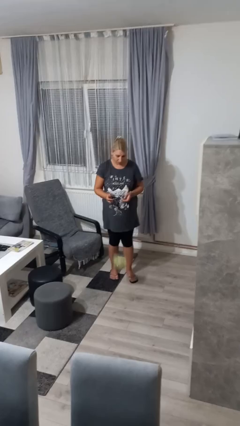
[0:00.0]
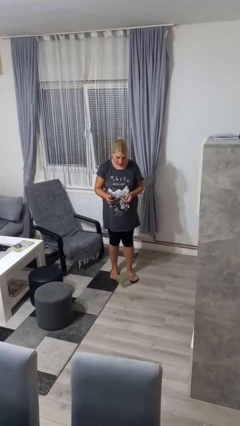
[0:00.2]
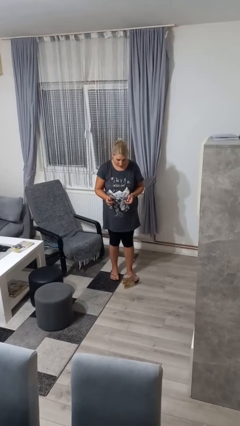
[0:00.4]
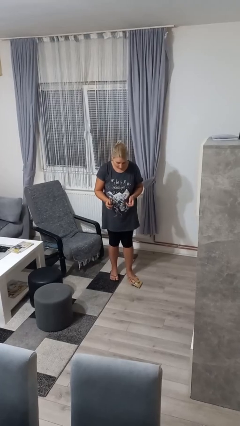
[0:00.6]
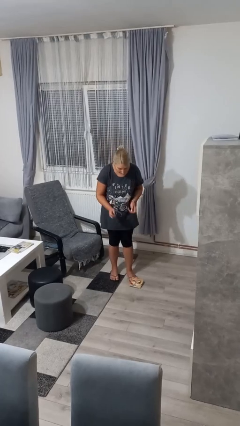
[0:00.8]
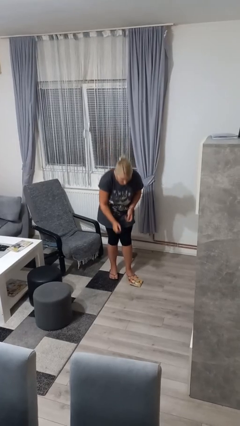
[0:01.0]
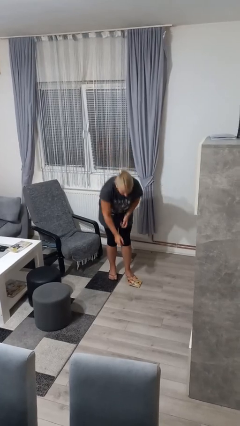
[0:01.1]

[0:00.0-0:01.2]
person drops object

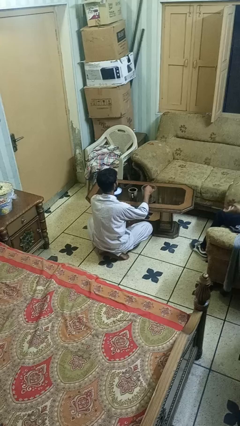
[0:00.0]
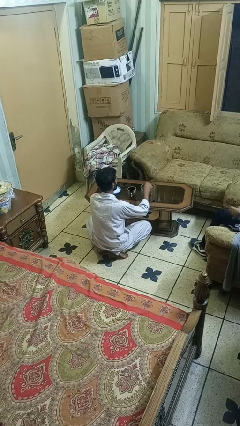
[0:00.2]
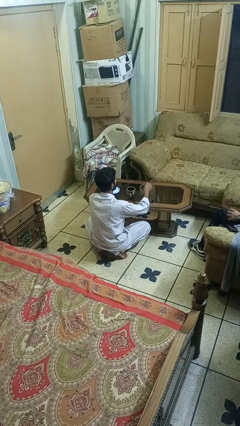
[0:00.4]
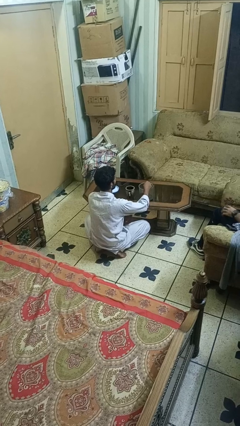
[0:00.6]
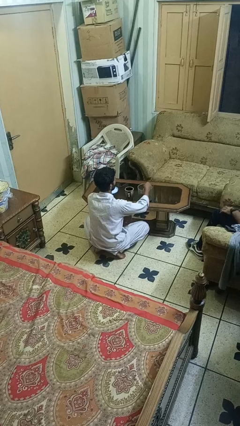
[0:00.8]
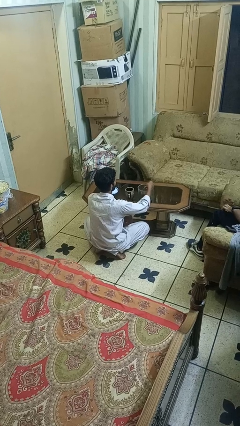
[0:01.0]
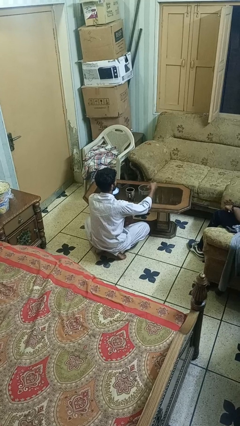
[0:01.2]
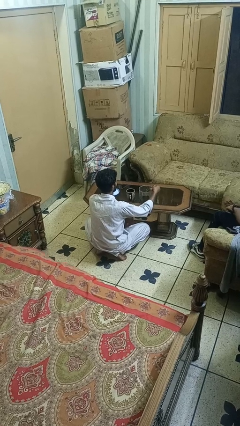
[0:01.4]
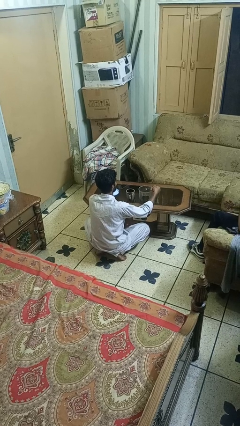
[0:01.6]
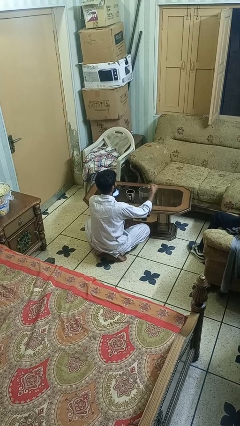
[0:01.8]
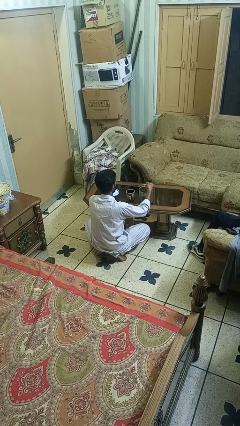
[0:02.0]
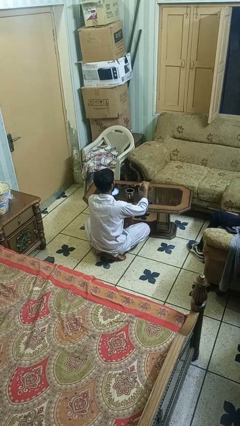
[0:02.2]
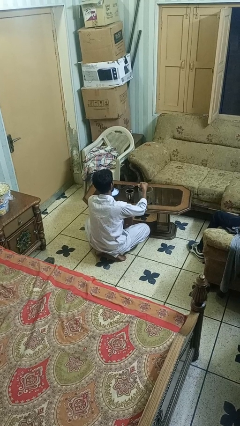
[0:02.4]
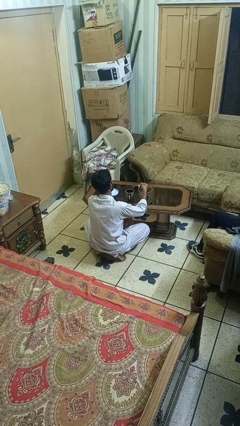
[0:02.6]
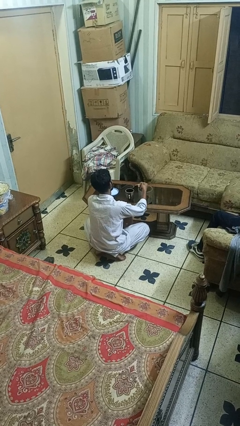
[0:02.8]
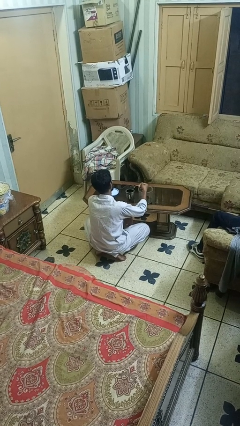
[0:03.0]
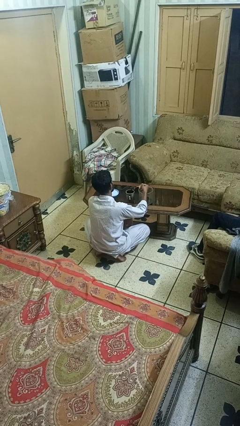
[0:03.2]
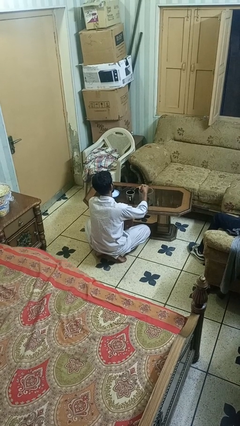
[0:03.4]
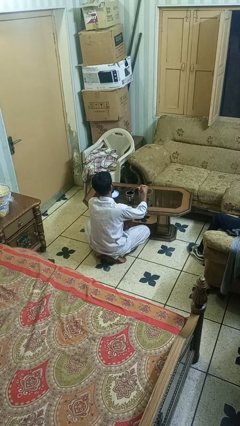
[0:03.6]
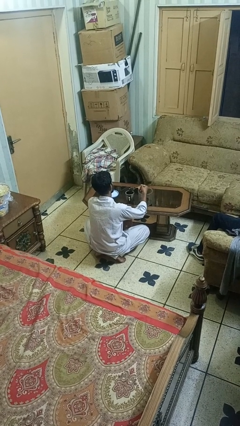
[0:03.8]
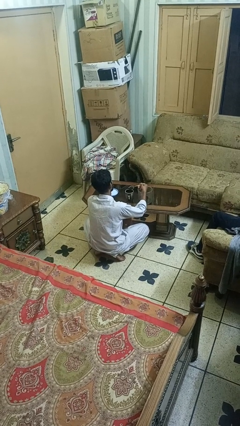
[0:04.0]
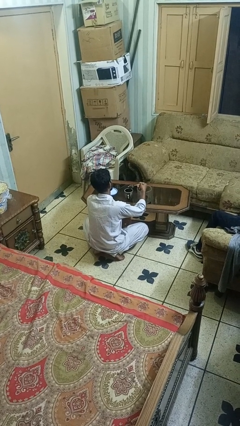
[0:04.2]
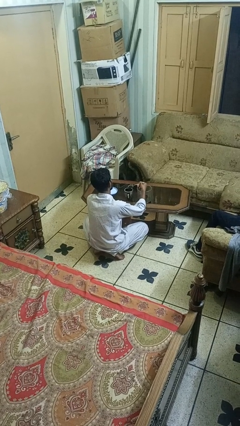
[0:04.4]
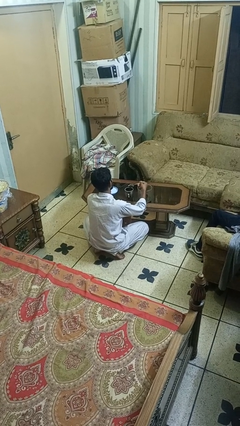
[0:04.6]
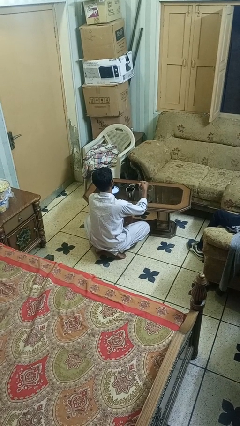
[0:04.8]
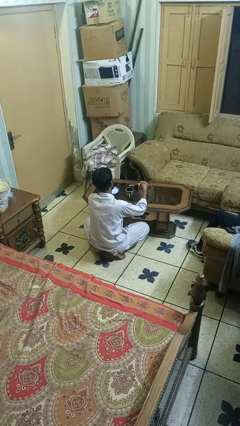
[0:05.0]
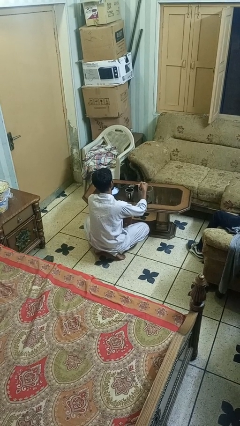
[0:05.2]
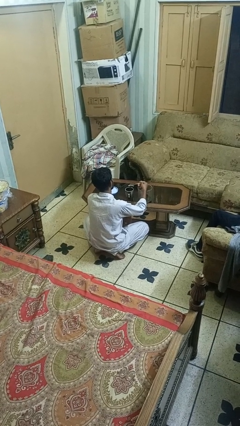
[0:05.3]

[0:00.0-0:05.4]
person pours coffee into mug

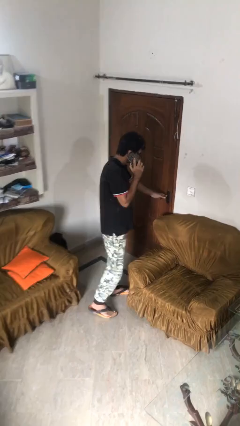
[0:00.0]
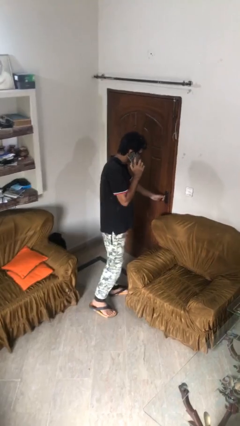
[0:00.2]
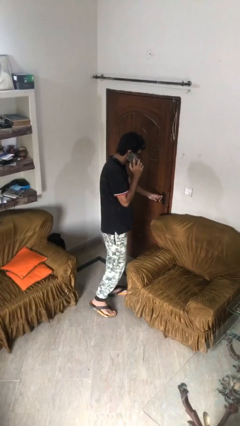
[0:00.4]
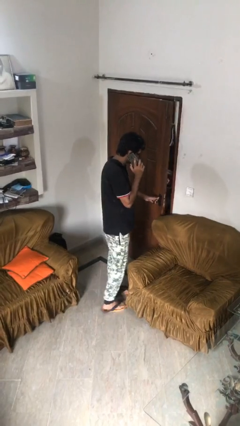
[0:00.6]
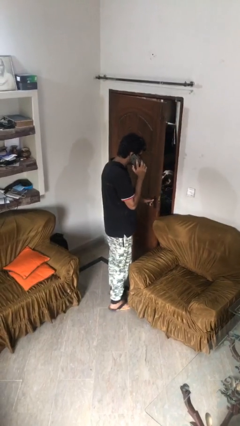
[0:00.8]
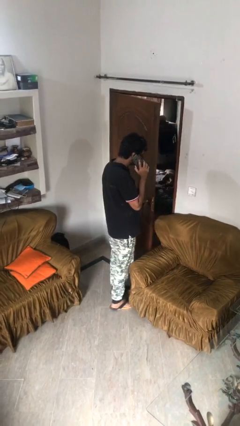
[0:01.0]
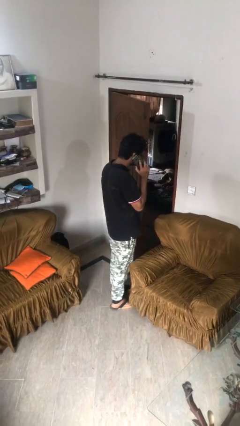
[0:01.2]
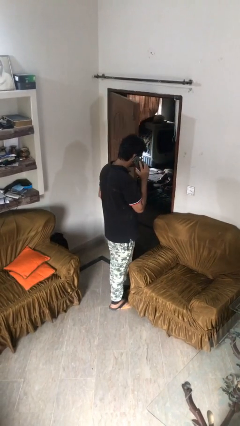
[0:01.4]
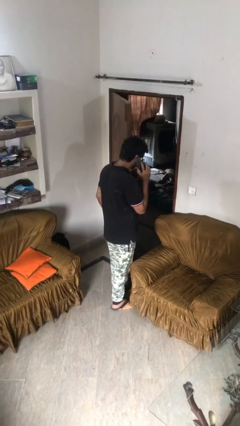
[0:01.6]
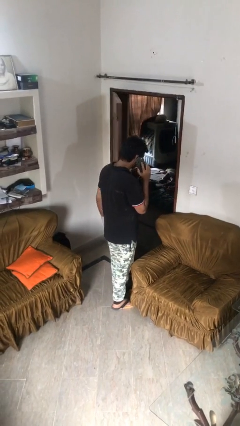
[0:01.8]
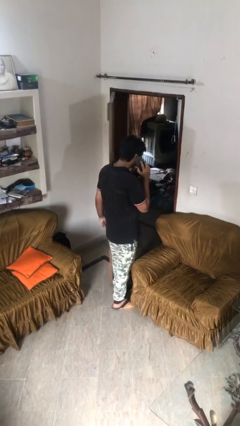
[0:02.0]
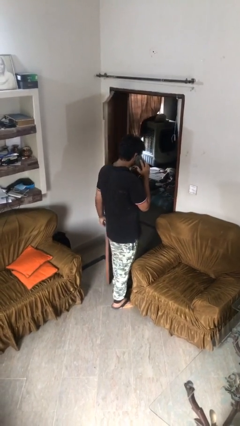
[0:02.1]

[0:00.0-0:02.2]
person opens facility door

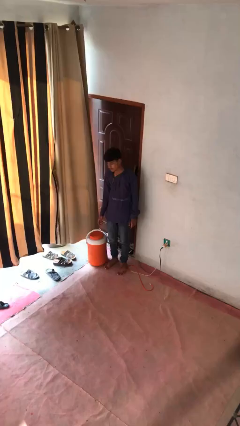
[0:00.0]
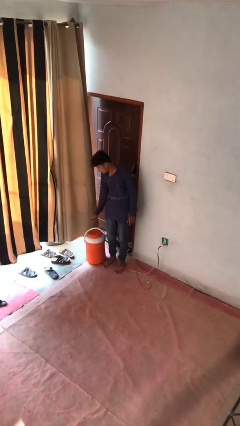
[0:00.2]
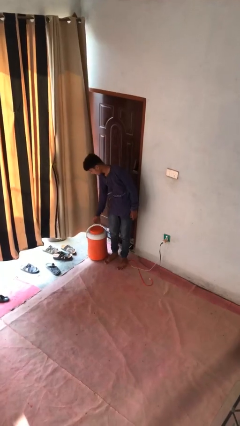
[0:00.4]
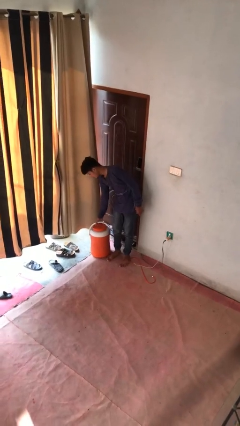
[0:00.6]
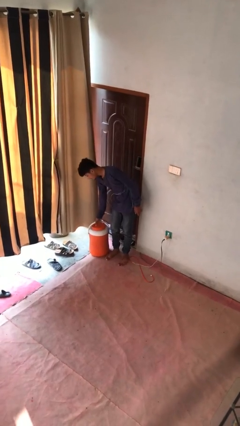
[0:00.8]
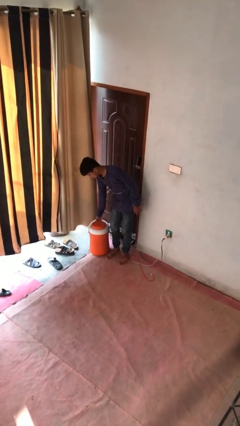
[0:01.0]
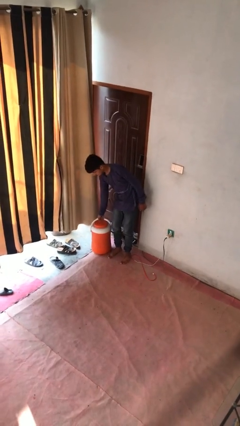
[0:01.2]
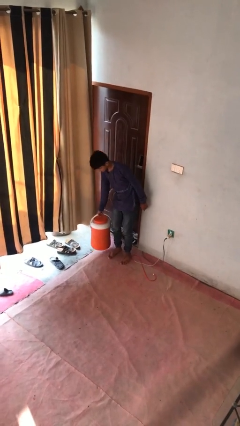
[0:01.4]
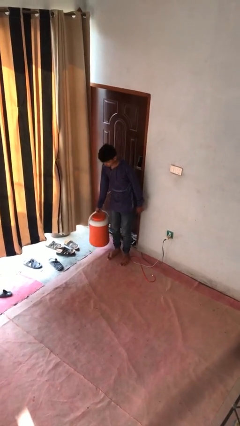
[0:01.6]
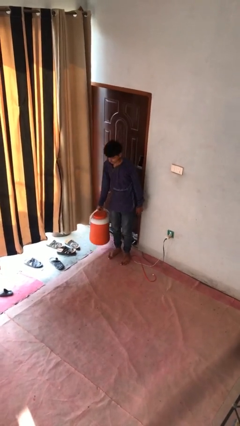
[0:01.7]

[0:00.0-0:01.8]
person picks up object from floor

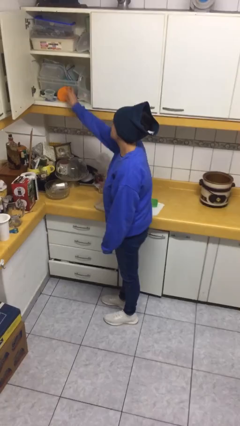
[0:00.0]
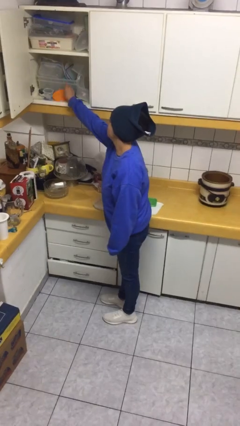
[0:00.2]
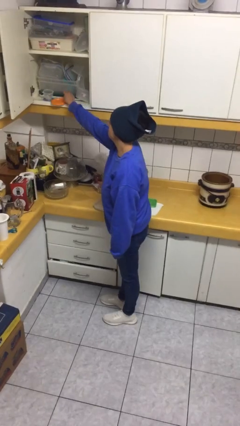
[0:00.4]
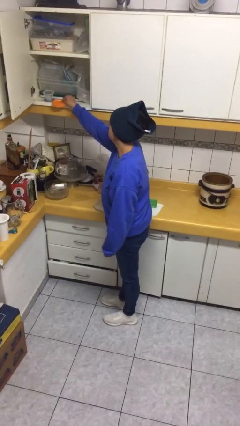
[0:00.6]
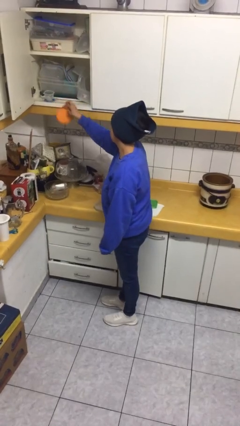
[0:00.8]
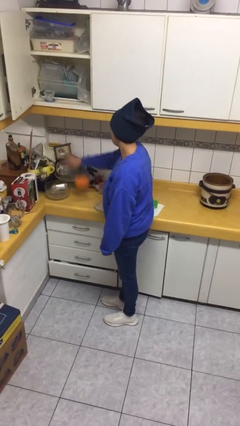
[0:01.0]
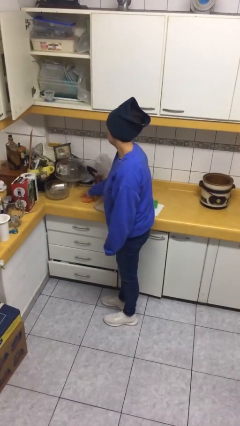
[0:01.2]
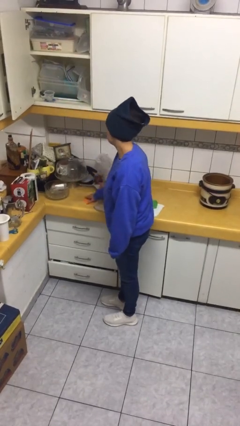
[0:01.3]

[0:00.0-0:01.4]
person takes object from cabinet

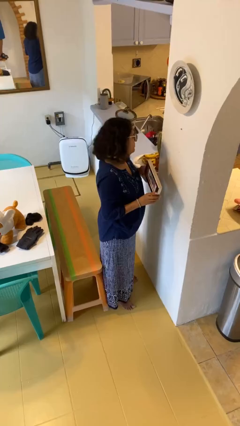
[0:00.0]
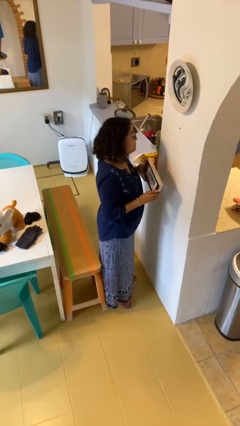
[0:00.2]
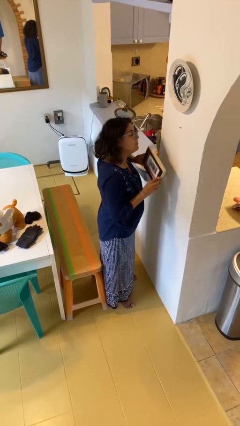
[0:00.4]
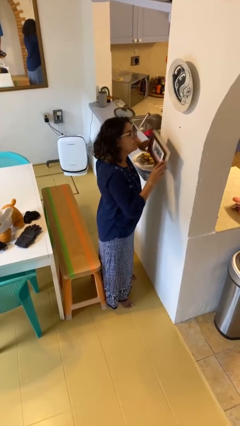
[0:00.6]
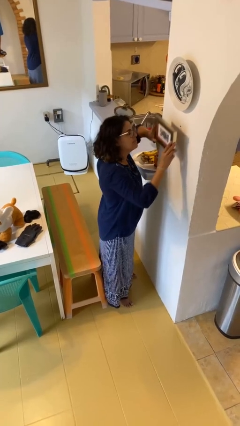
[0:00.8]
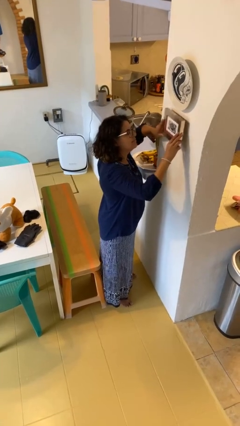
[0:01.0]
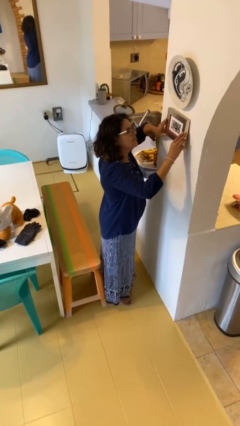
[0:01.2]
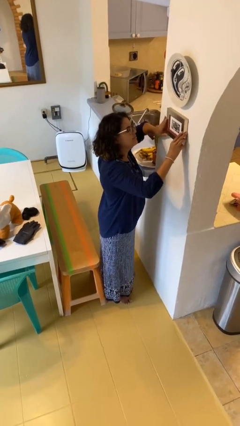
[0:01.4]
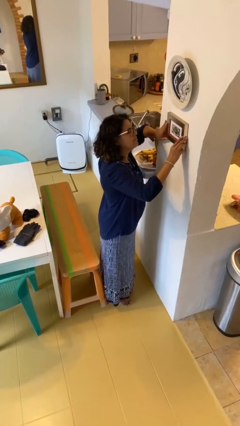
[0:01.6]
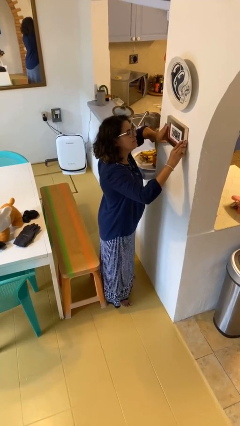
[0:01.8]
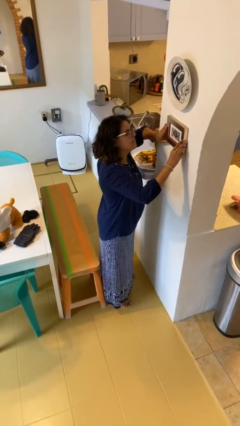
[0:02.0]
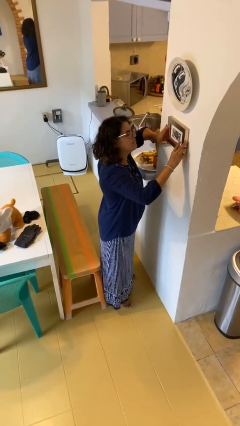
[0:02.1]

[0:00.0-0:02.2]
person puts up picture frame

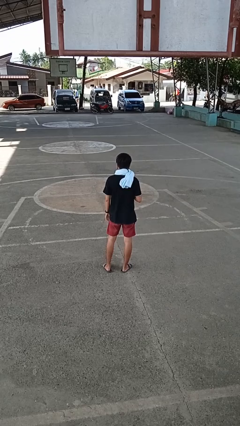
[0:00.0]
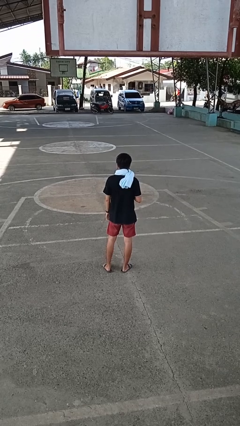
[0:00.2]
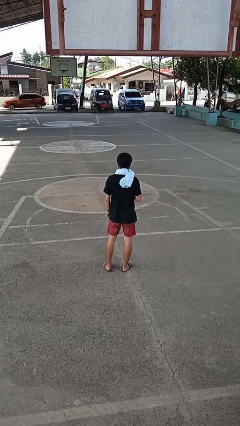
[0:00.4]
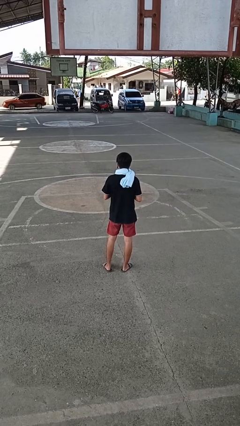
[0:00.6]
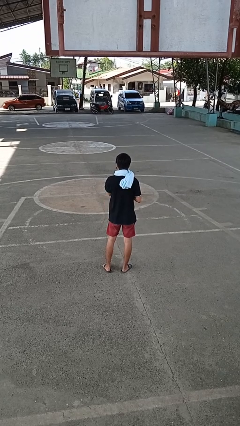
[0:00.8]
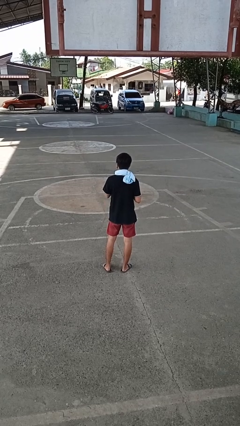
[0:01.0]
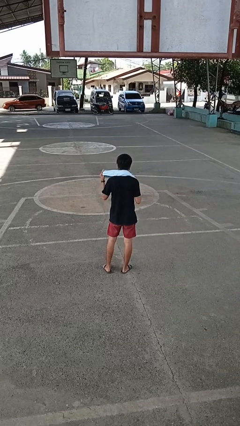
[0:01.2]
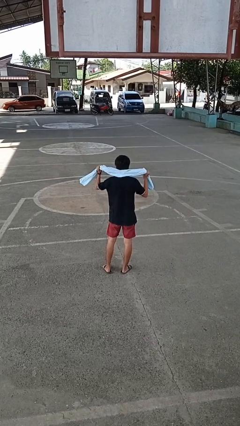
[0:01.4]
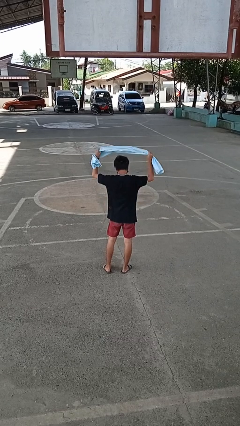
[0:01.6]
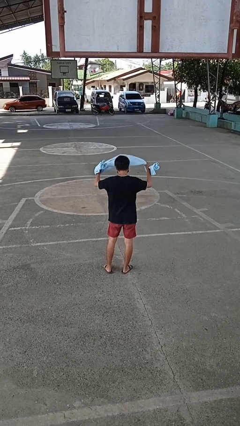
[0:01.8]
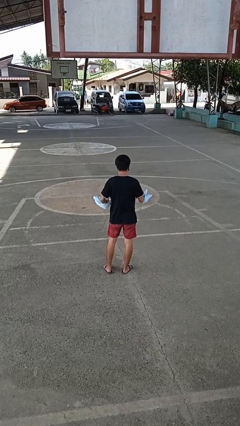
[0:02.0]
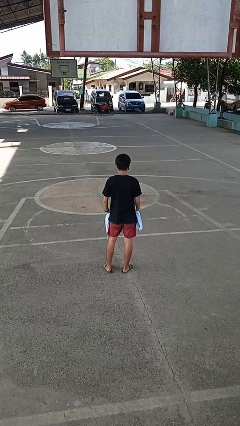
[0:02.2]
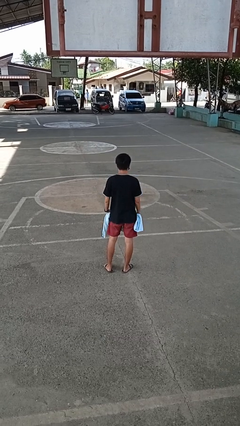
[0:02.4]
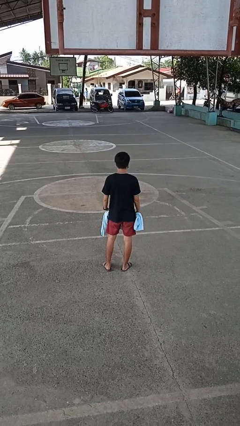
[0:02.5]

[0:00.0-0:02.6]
person takes off scarf
